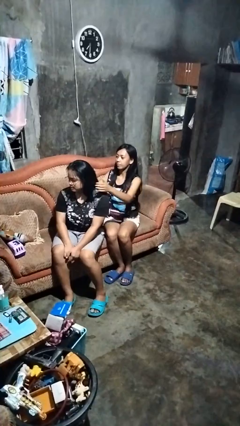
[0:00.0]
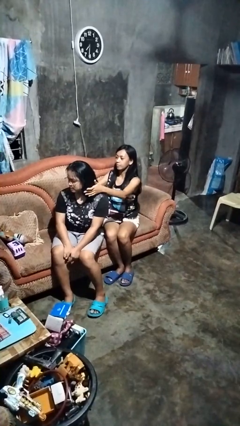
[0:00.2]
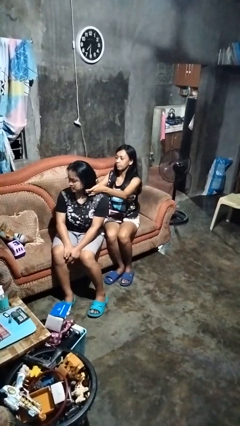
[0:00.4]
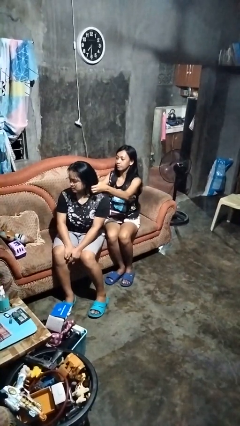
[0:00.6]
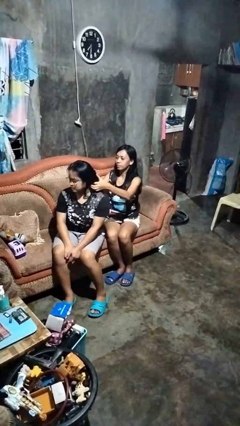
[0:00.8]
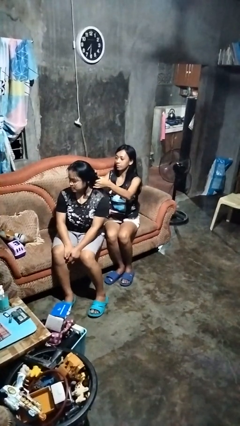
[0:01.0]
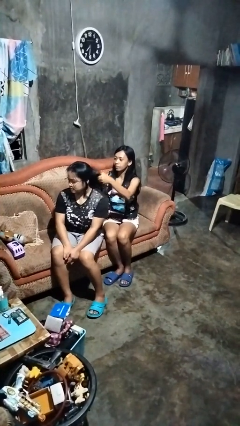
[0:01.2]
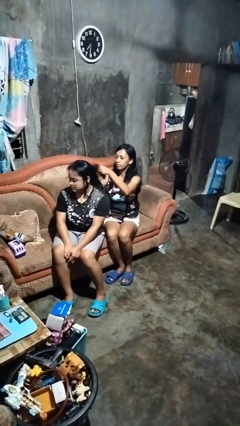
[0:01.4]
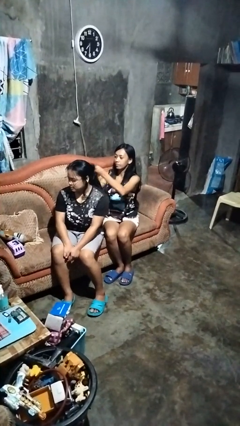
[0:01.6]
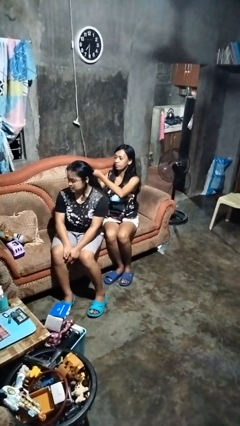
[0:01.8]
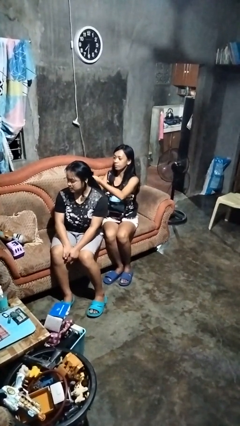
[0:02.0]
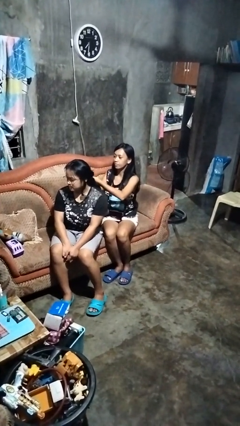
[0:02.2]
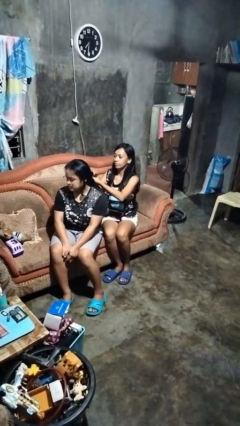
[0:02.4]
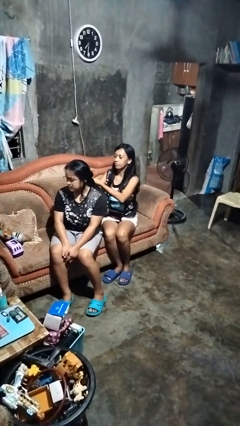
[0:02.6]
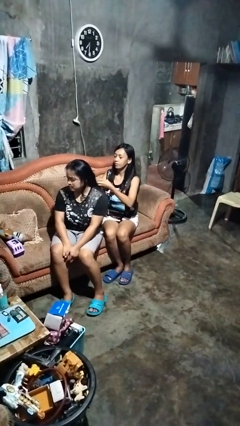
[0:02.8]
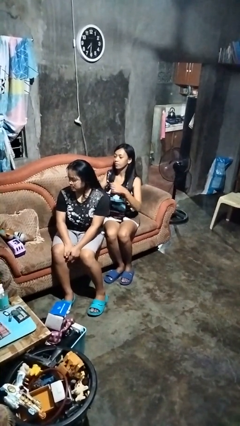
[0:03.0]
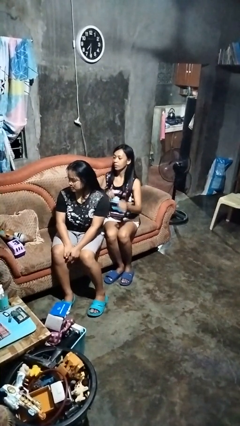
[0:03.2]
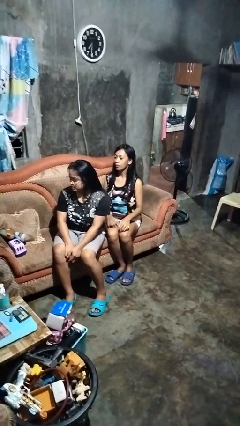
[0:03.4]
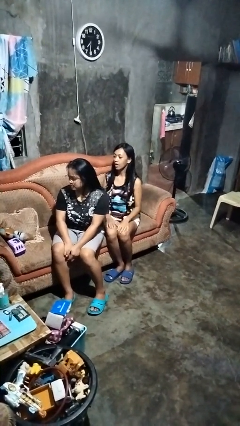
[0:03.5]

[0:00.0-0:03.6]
person braids hair of person

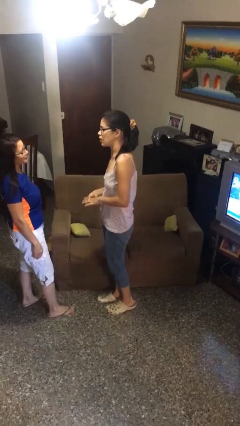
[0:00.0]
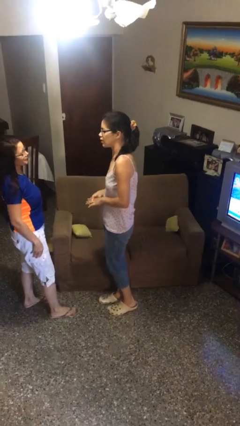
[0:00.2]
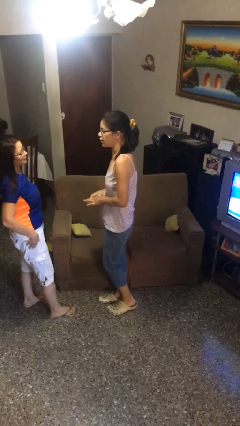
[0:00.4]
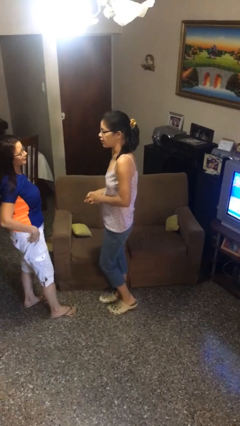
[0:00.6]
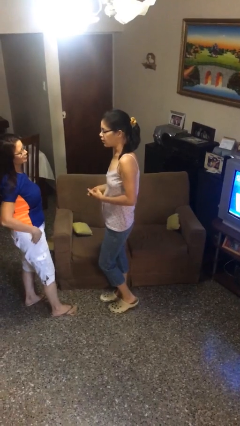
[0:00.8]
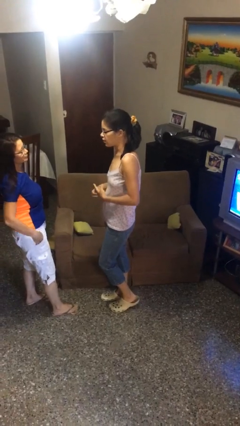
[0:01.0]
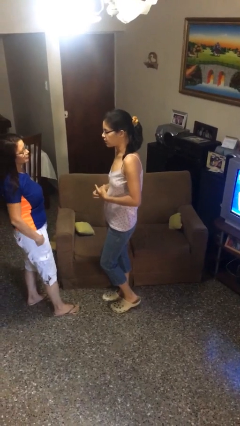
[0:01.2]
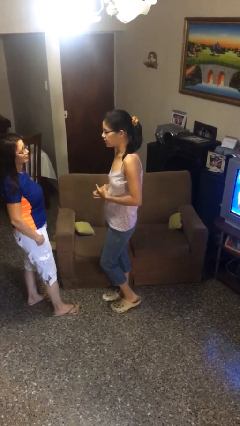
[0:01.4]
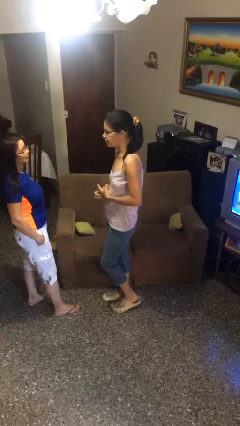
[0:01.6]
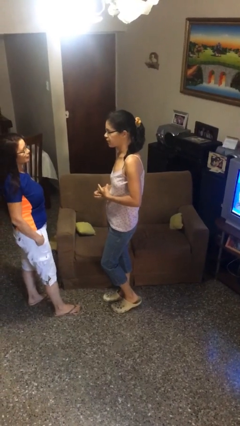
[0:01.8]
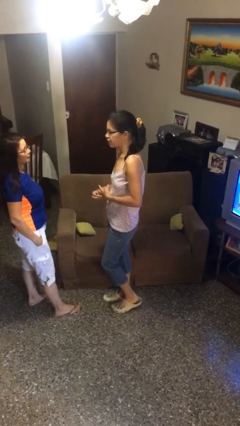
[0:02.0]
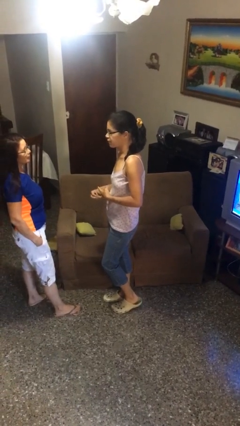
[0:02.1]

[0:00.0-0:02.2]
person talks to person

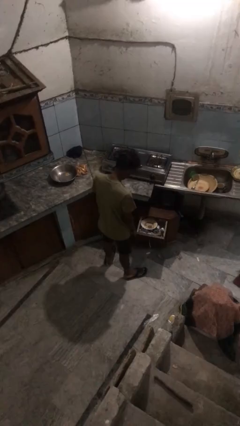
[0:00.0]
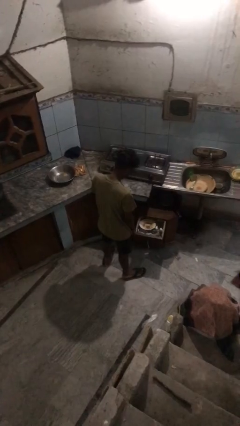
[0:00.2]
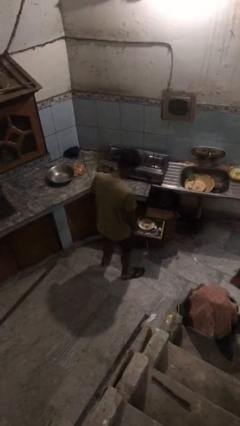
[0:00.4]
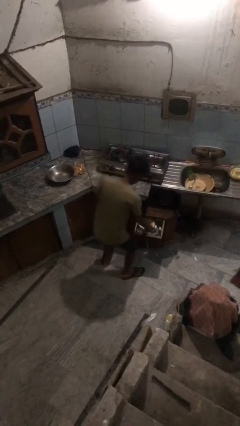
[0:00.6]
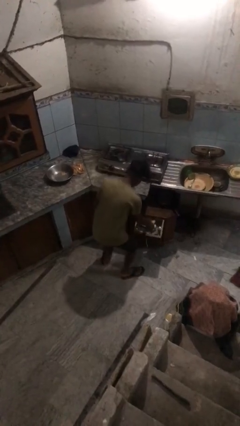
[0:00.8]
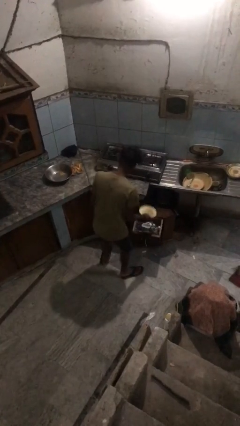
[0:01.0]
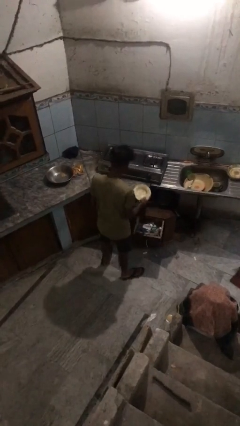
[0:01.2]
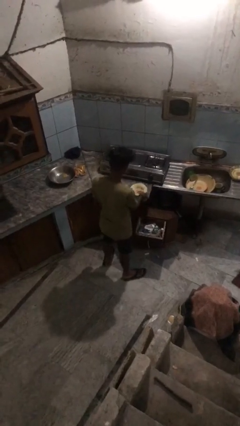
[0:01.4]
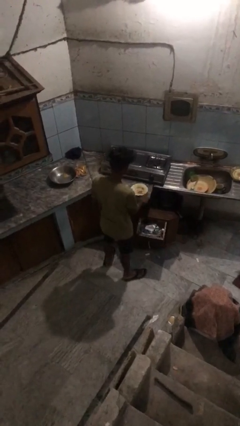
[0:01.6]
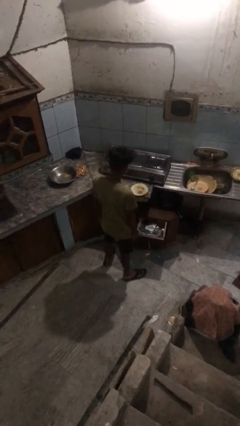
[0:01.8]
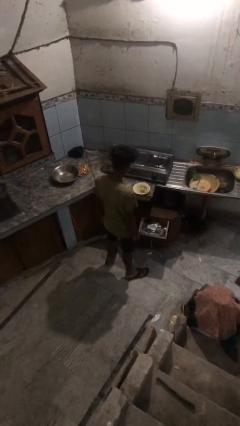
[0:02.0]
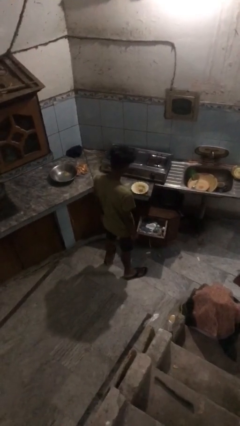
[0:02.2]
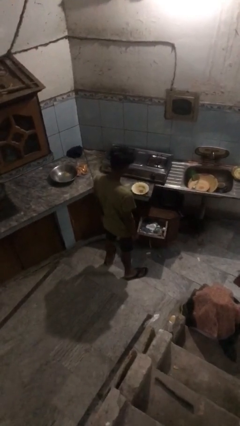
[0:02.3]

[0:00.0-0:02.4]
person takes object from kitchen drawer

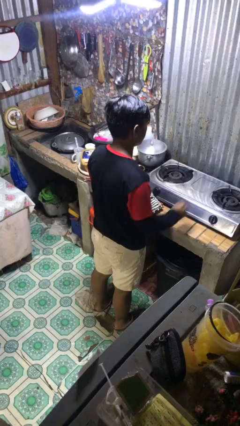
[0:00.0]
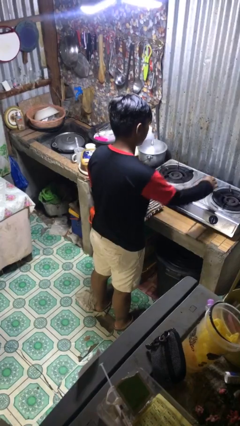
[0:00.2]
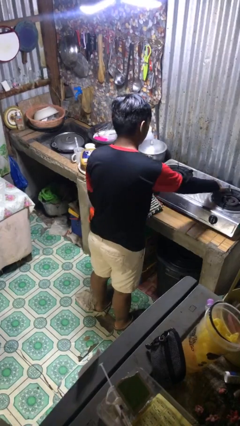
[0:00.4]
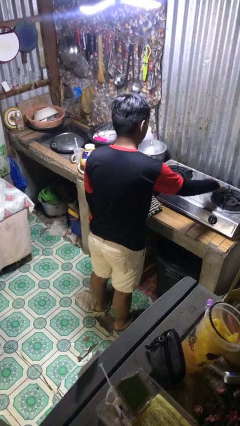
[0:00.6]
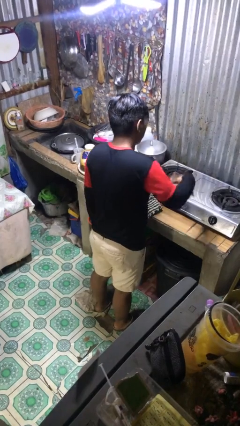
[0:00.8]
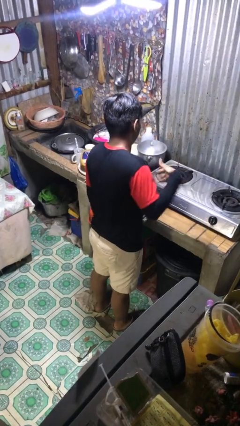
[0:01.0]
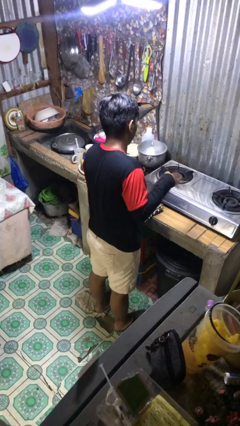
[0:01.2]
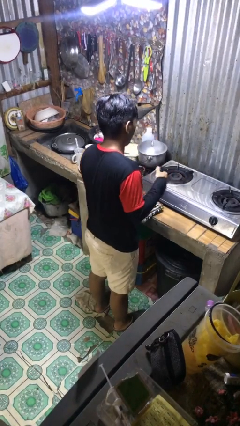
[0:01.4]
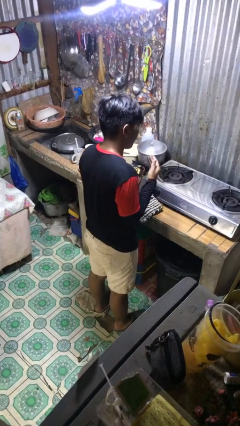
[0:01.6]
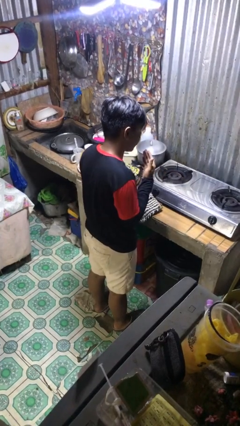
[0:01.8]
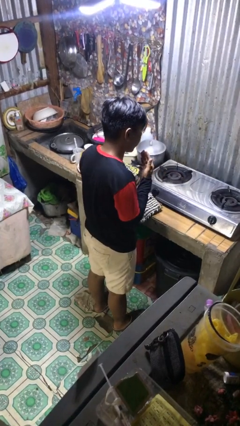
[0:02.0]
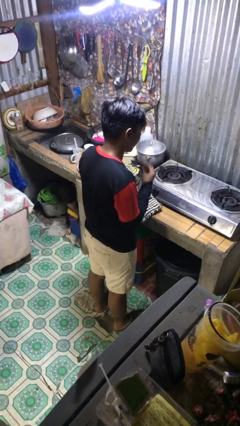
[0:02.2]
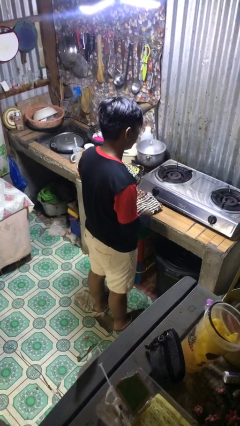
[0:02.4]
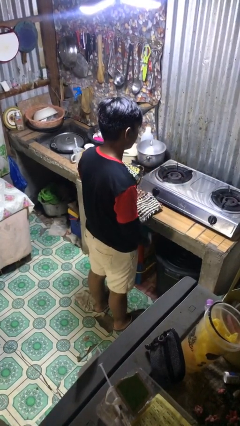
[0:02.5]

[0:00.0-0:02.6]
person burns hand

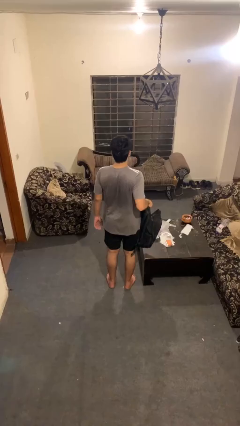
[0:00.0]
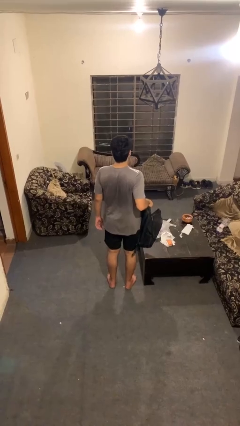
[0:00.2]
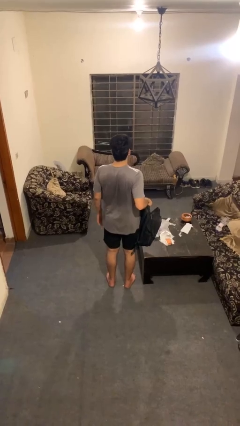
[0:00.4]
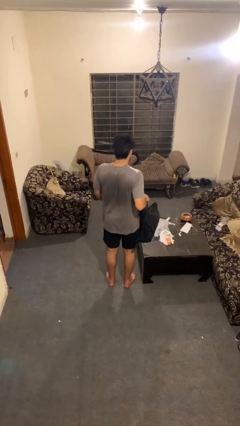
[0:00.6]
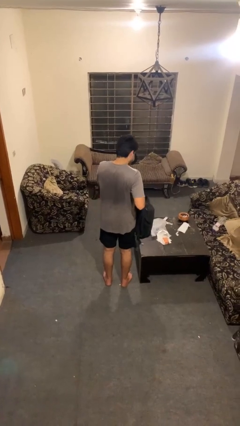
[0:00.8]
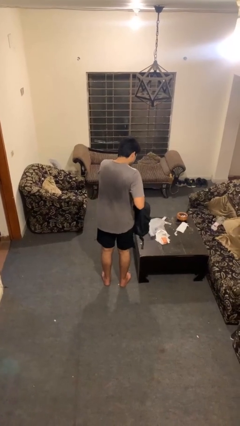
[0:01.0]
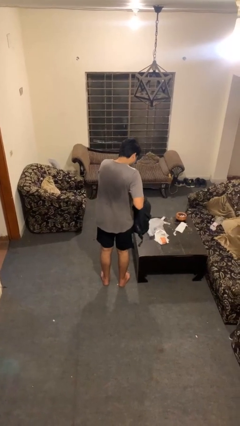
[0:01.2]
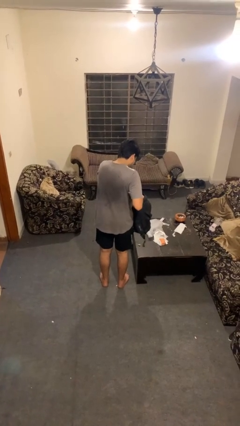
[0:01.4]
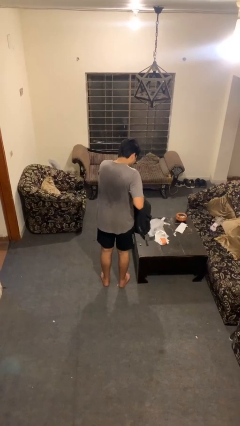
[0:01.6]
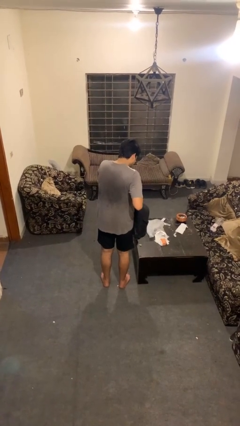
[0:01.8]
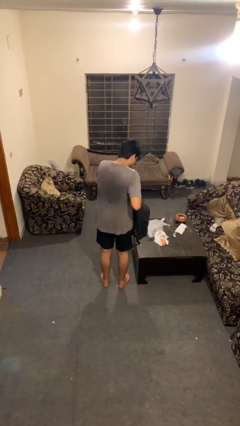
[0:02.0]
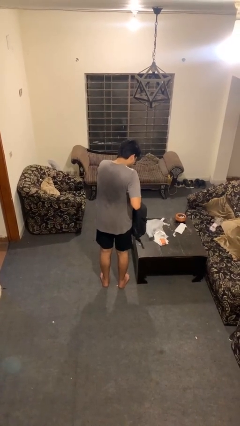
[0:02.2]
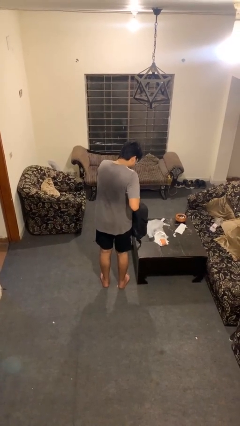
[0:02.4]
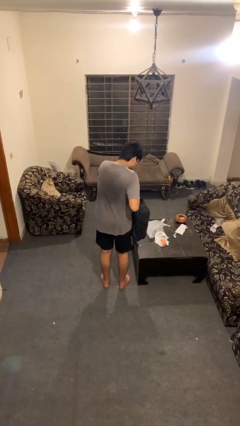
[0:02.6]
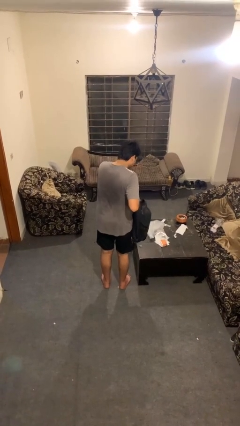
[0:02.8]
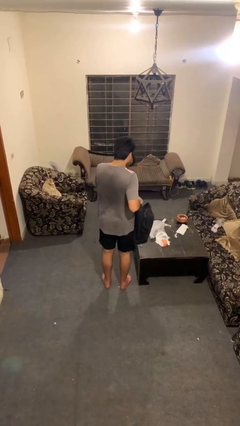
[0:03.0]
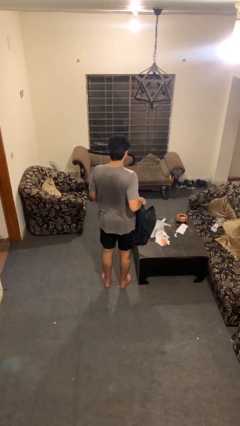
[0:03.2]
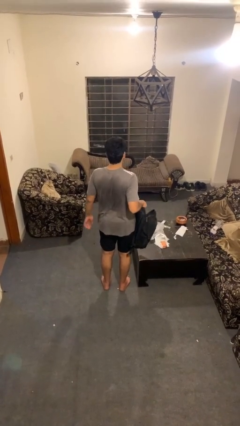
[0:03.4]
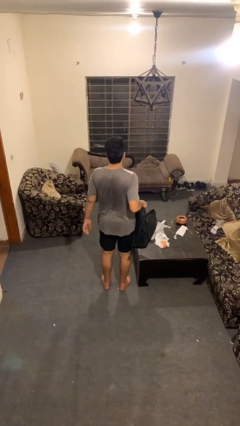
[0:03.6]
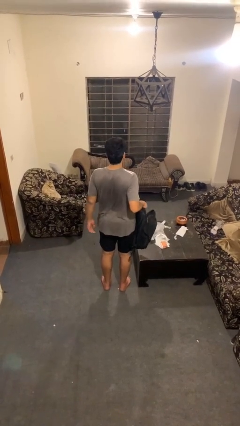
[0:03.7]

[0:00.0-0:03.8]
person searches in bag

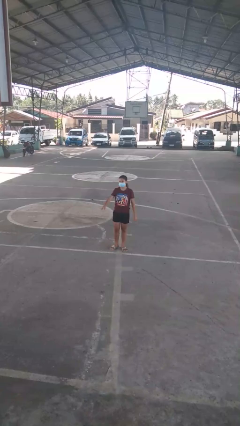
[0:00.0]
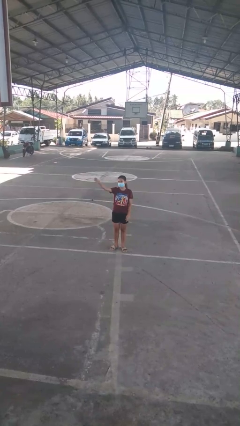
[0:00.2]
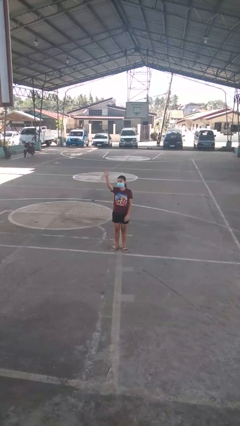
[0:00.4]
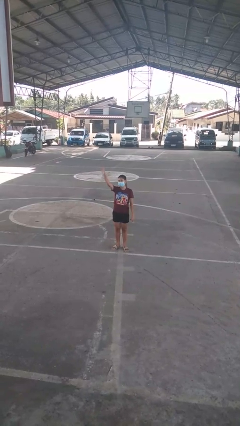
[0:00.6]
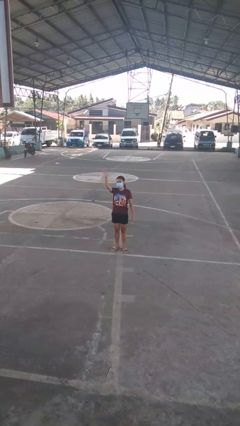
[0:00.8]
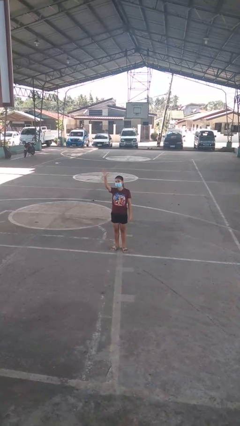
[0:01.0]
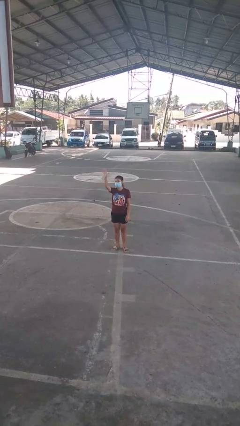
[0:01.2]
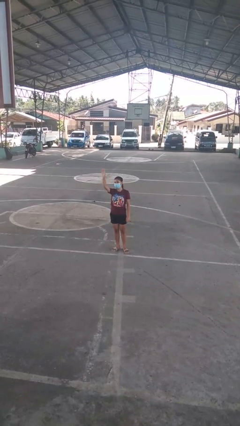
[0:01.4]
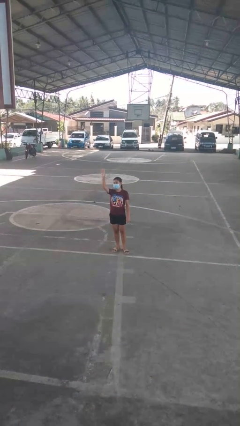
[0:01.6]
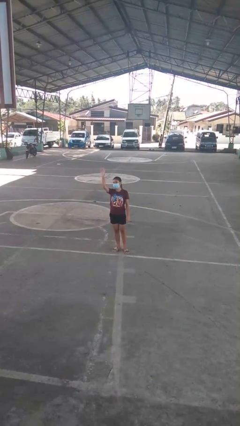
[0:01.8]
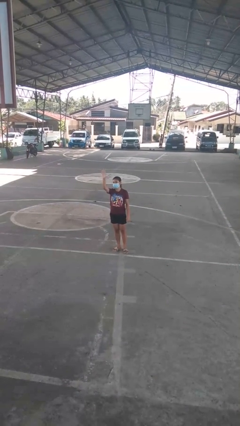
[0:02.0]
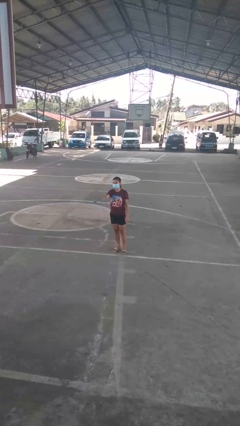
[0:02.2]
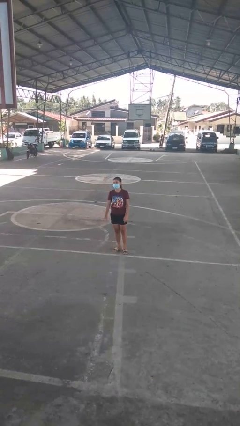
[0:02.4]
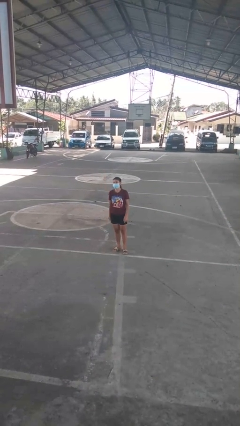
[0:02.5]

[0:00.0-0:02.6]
person waves at person

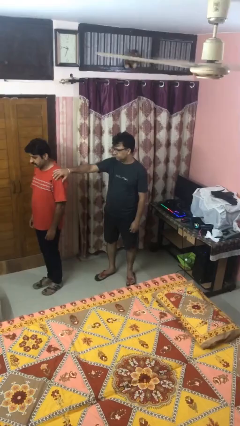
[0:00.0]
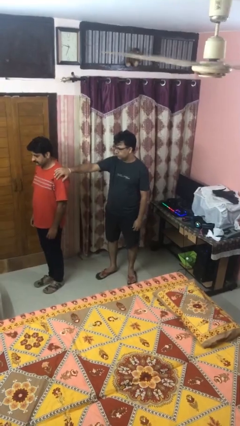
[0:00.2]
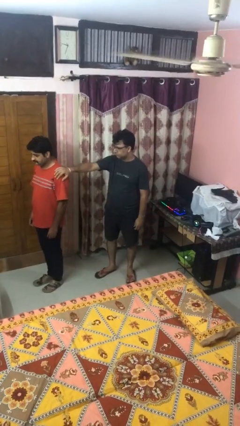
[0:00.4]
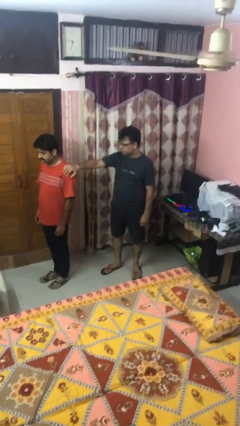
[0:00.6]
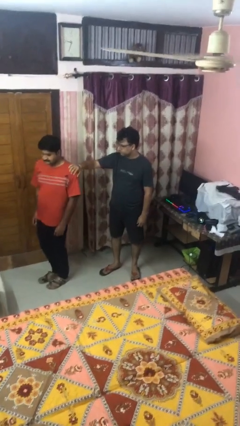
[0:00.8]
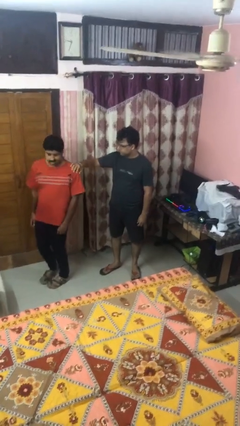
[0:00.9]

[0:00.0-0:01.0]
person grabs person by shoulder
